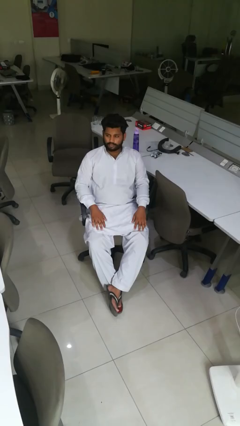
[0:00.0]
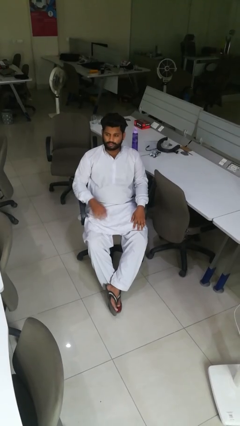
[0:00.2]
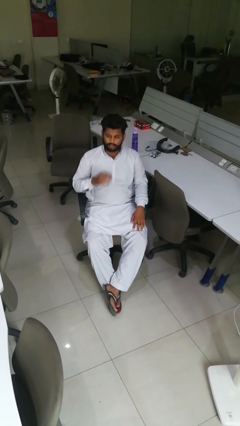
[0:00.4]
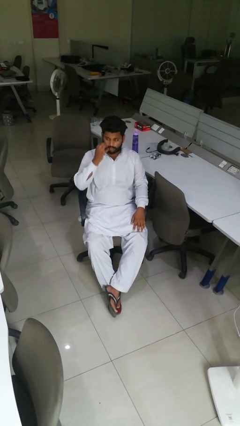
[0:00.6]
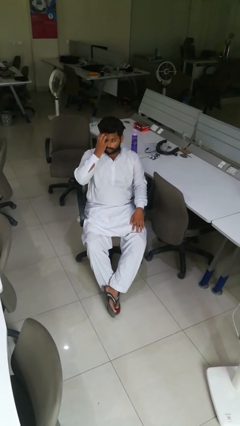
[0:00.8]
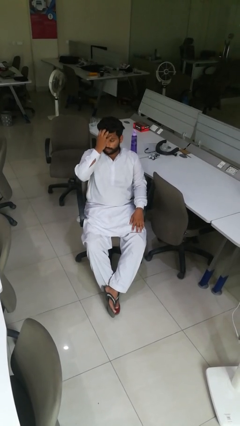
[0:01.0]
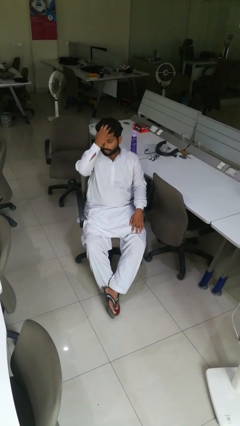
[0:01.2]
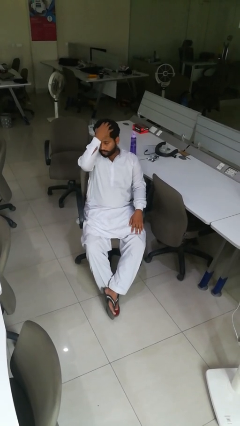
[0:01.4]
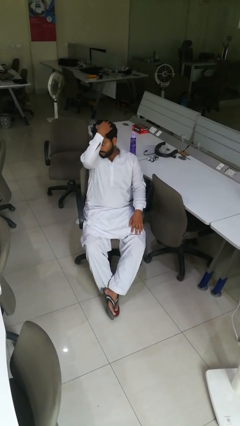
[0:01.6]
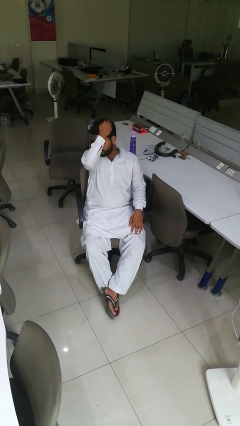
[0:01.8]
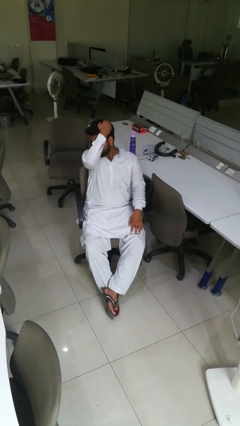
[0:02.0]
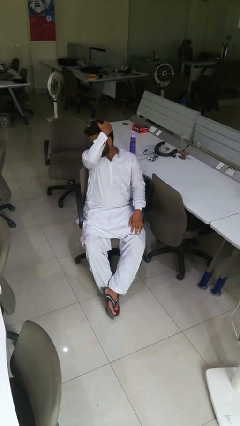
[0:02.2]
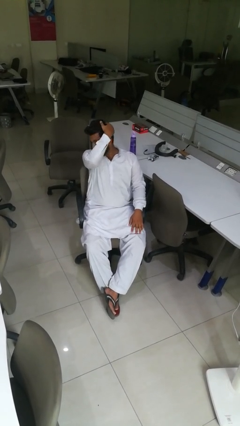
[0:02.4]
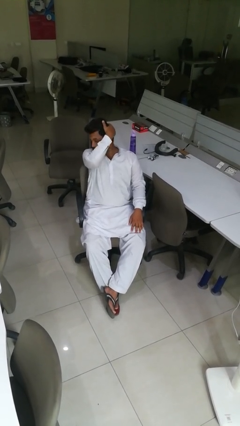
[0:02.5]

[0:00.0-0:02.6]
person strokes hair

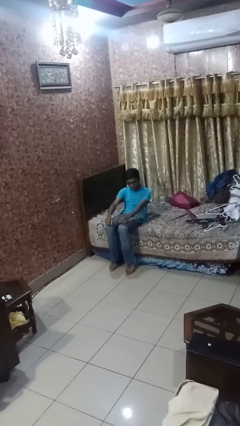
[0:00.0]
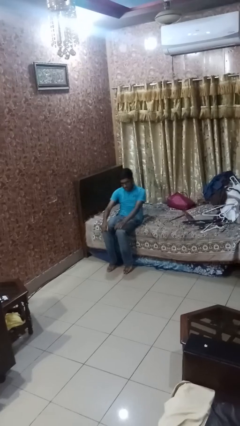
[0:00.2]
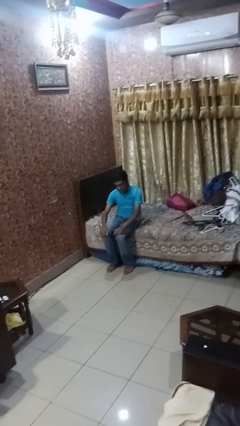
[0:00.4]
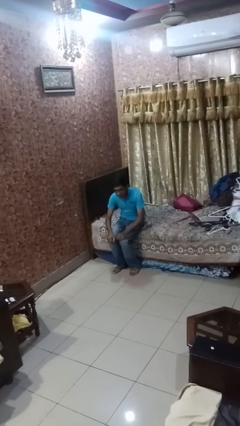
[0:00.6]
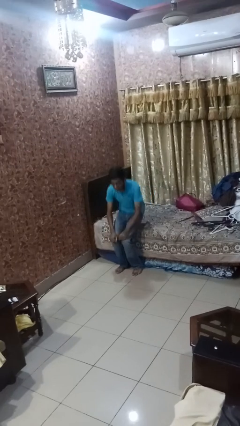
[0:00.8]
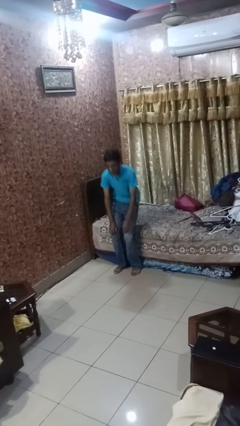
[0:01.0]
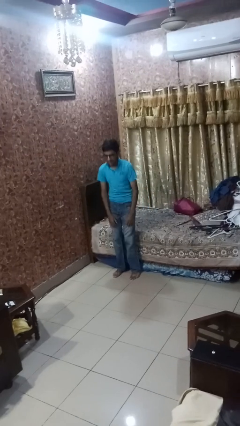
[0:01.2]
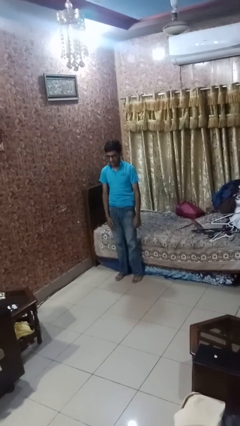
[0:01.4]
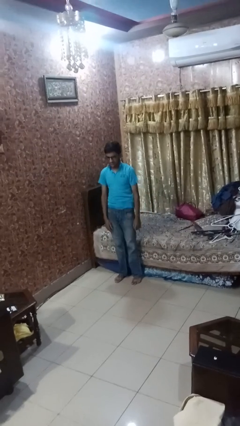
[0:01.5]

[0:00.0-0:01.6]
person stands up

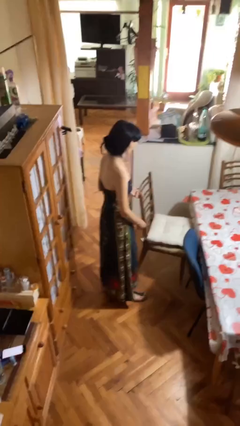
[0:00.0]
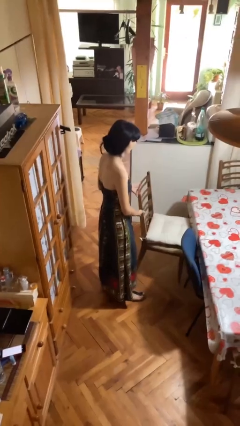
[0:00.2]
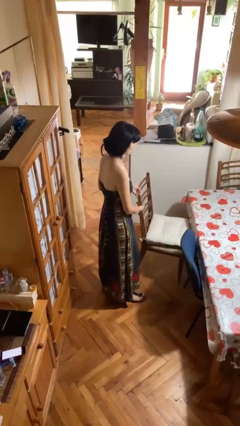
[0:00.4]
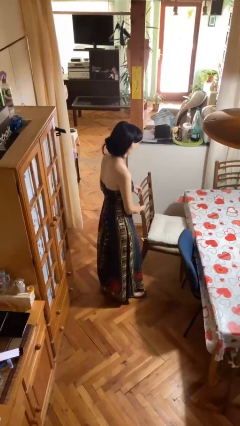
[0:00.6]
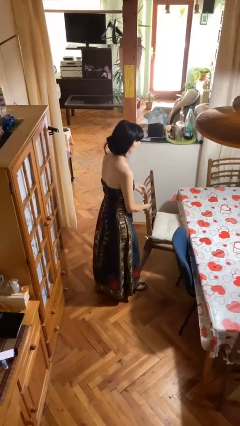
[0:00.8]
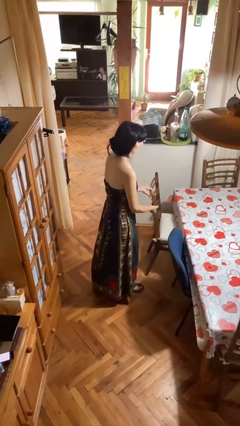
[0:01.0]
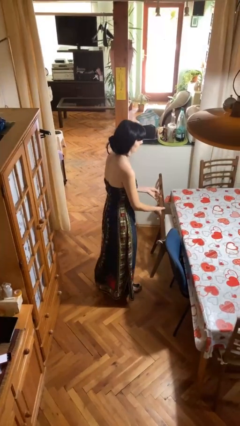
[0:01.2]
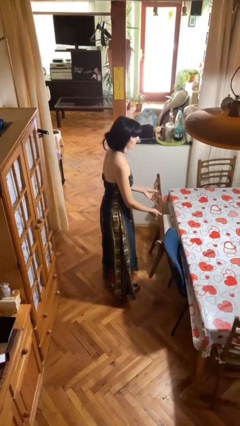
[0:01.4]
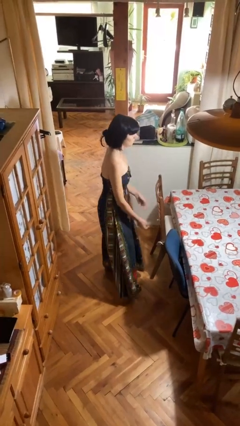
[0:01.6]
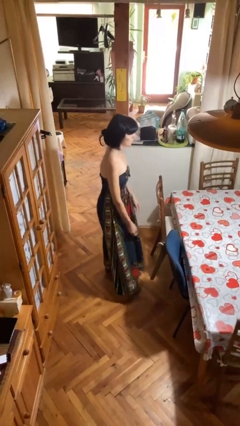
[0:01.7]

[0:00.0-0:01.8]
person pushes in chair

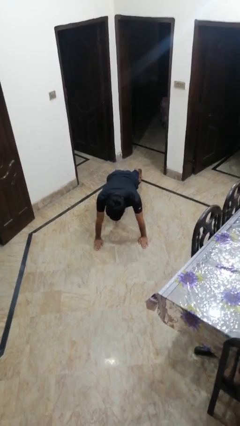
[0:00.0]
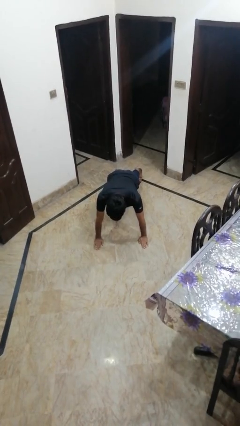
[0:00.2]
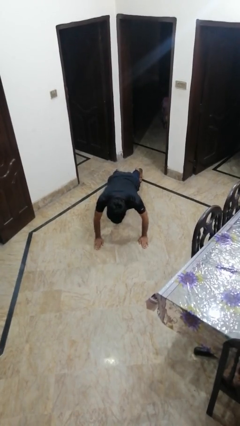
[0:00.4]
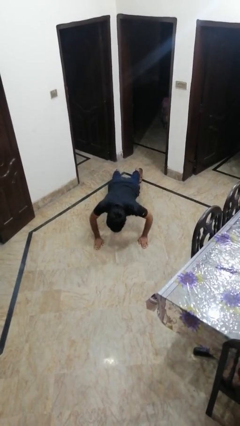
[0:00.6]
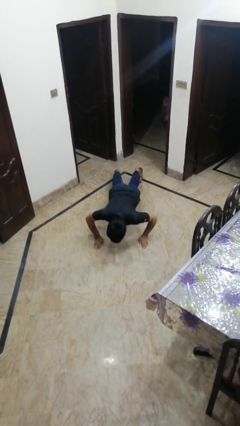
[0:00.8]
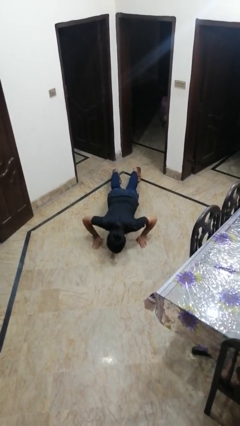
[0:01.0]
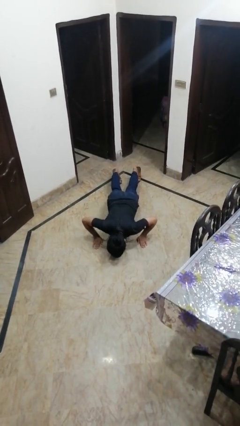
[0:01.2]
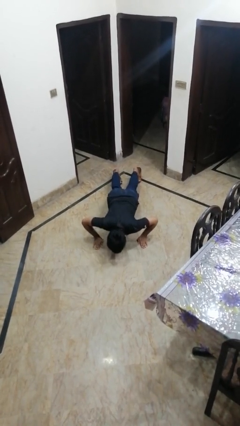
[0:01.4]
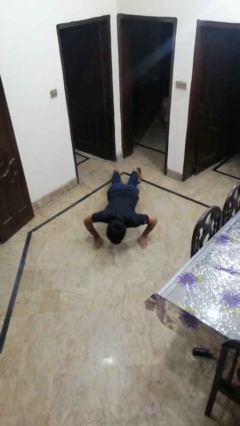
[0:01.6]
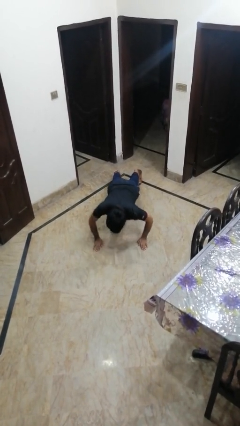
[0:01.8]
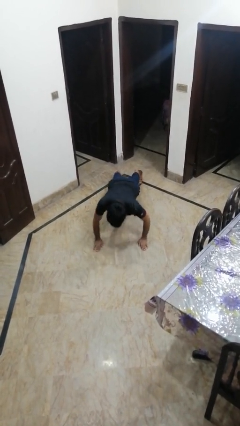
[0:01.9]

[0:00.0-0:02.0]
person exercises with pushup

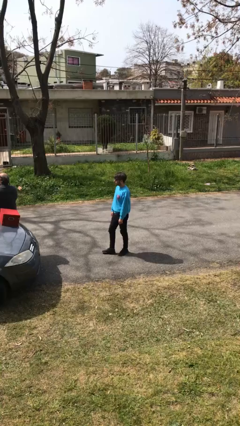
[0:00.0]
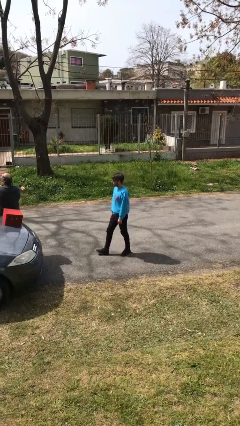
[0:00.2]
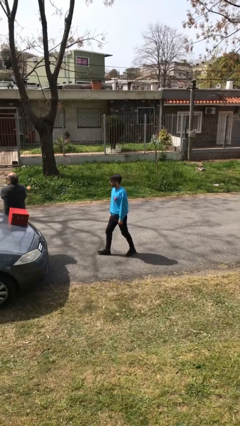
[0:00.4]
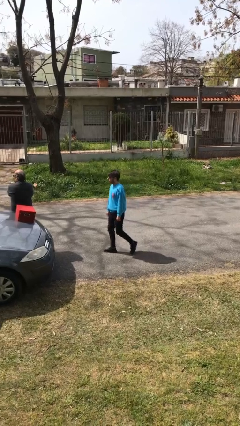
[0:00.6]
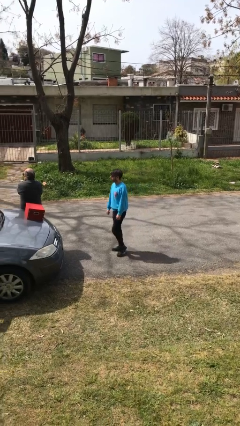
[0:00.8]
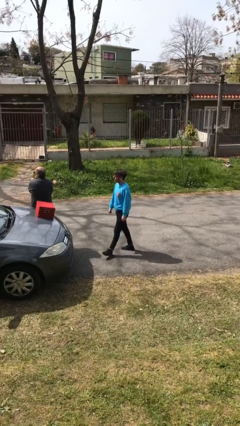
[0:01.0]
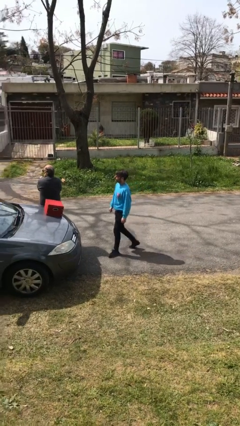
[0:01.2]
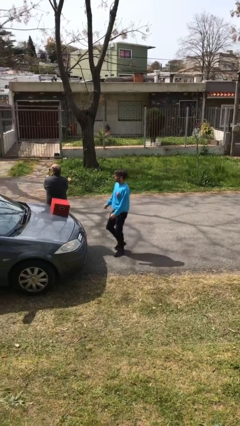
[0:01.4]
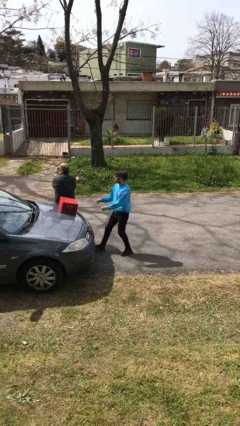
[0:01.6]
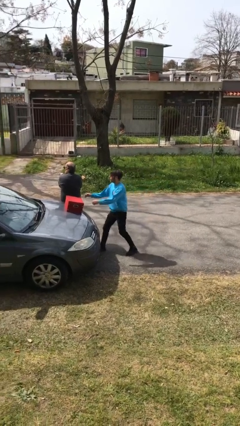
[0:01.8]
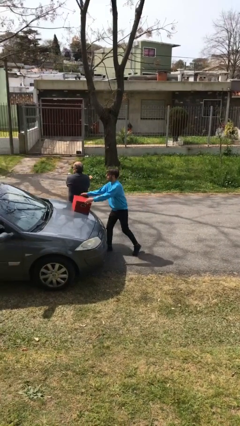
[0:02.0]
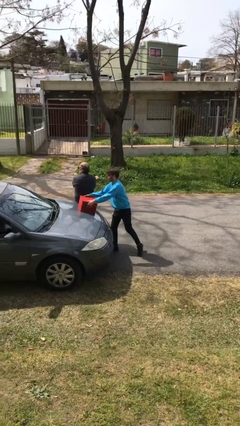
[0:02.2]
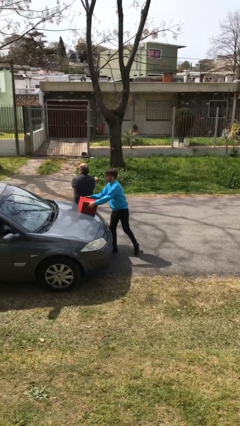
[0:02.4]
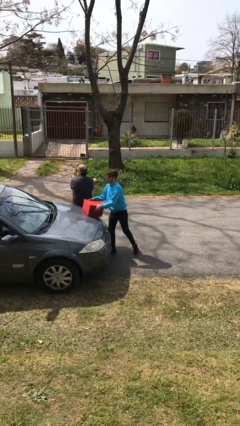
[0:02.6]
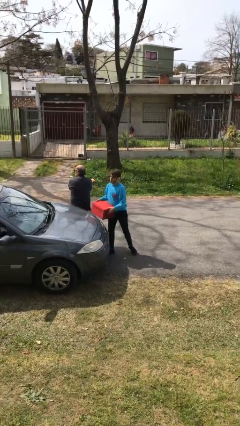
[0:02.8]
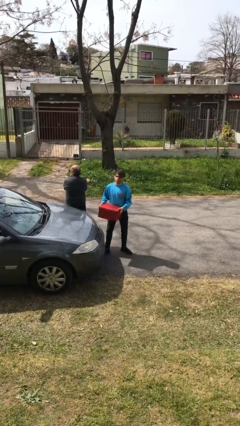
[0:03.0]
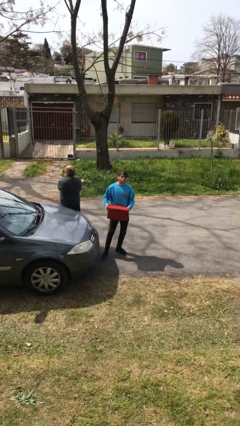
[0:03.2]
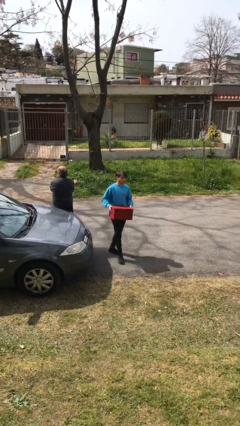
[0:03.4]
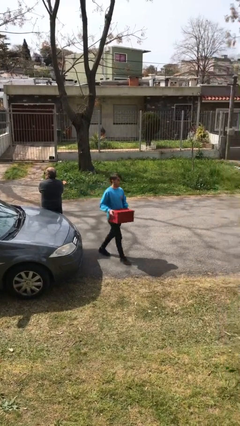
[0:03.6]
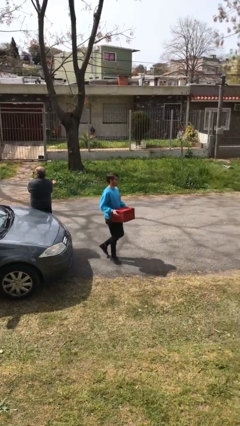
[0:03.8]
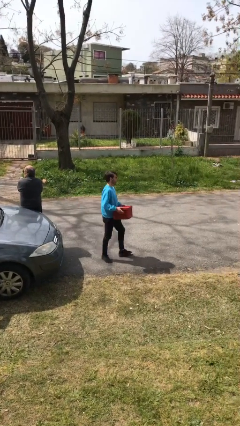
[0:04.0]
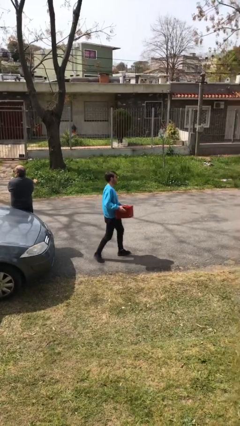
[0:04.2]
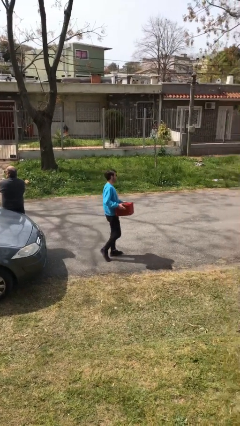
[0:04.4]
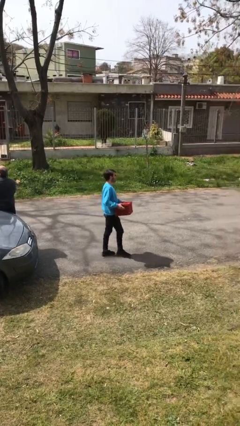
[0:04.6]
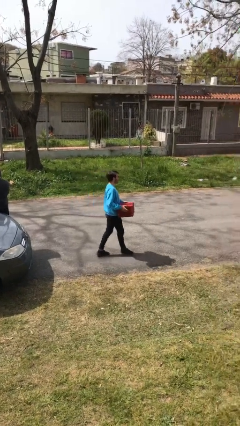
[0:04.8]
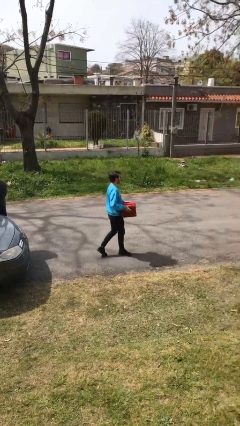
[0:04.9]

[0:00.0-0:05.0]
person steals object from person

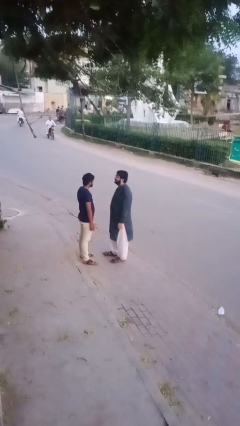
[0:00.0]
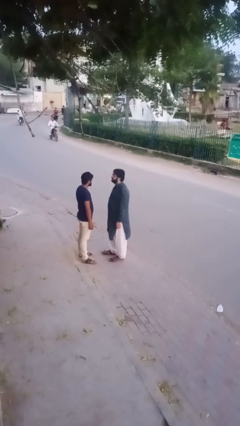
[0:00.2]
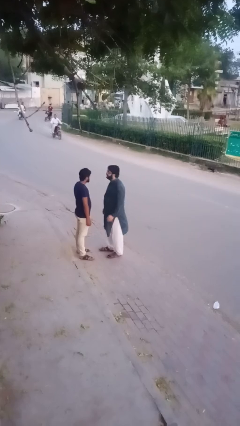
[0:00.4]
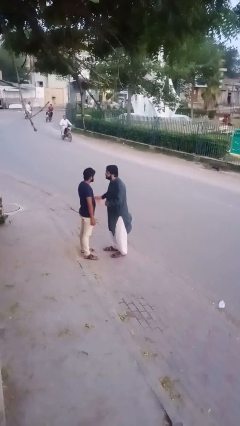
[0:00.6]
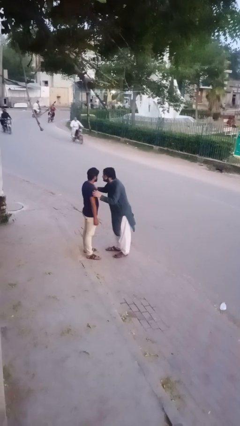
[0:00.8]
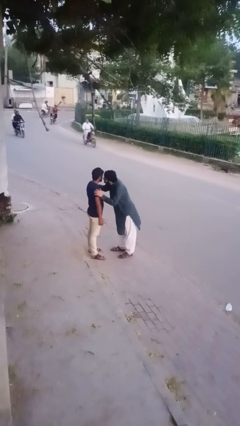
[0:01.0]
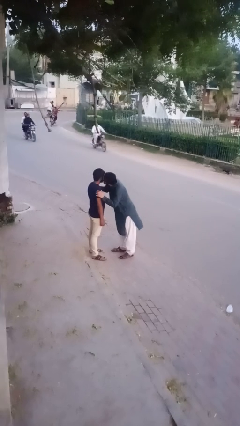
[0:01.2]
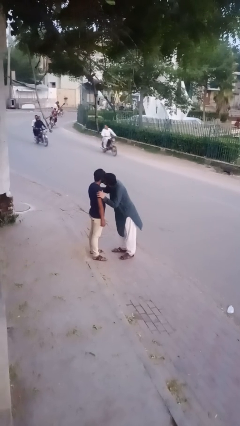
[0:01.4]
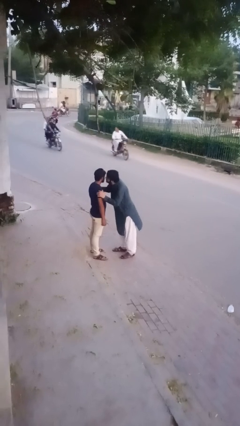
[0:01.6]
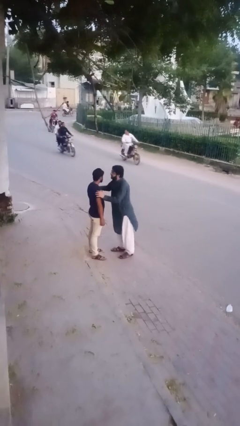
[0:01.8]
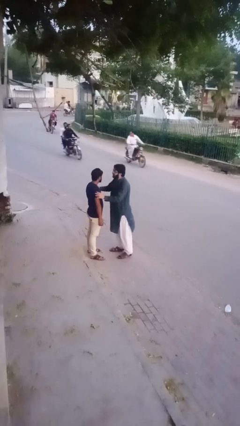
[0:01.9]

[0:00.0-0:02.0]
person kisses cheek of person

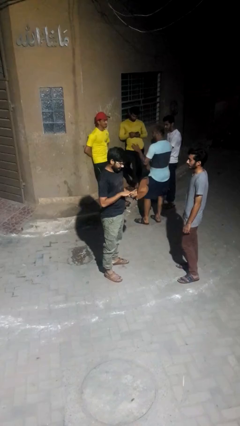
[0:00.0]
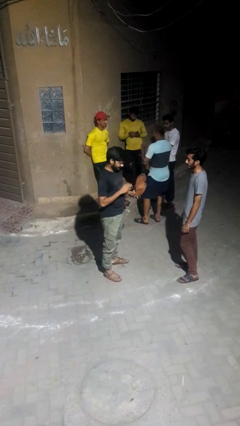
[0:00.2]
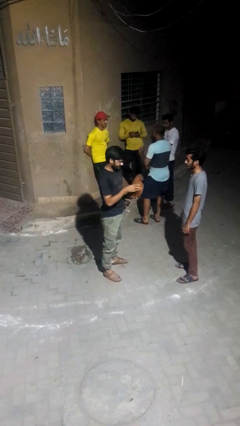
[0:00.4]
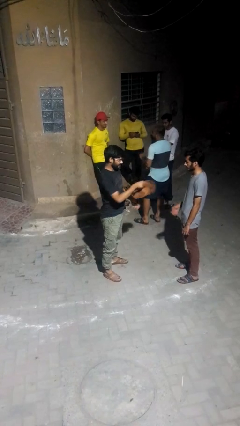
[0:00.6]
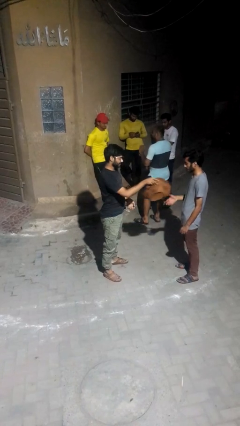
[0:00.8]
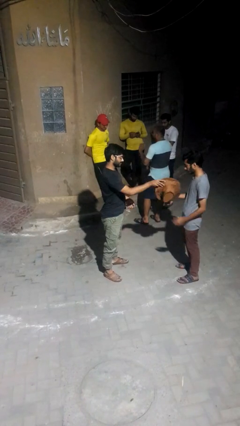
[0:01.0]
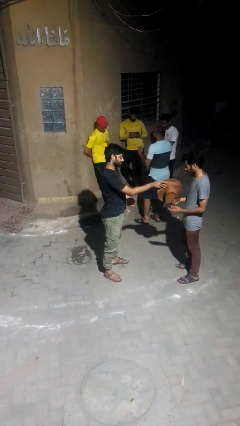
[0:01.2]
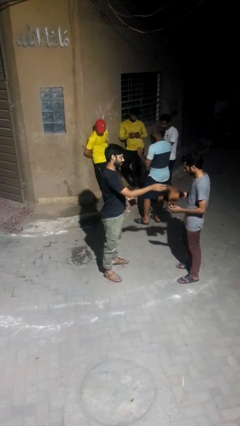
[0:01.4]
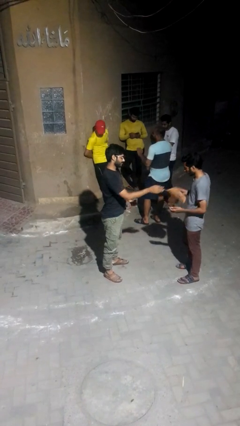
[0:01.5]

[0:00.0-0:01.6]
person transfers object to person

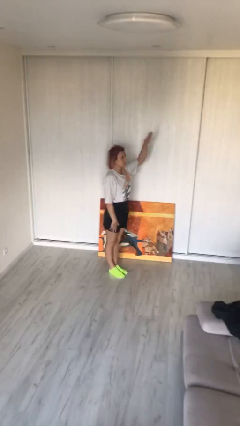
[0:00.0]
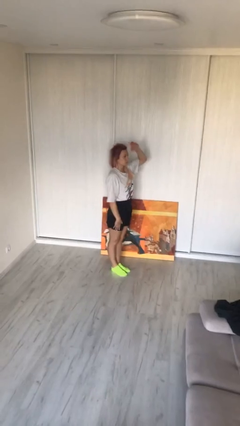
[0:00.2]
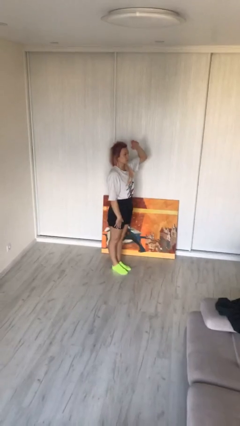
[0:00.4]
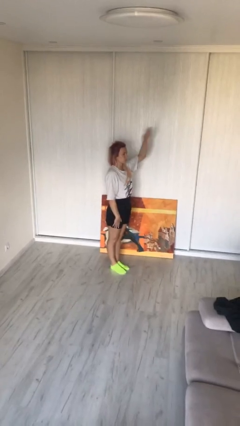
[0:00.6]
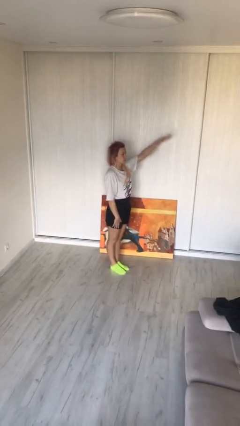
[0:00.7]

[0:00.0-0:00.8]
person salutes
